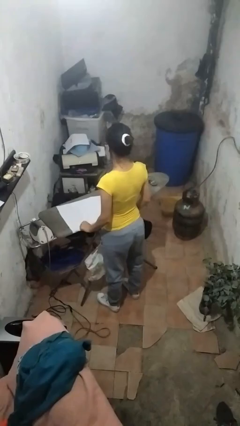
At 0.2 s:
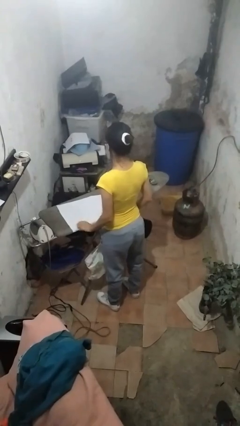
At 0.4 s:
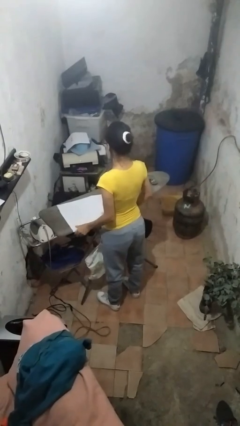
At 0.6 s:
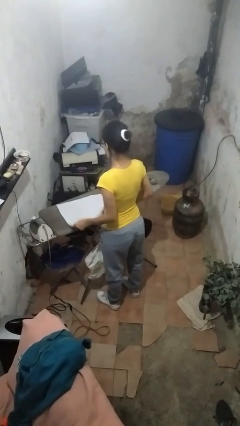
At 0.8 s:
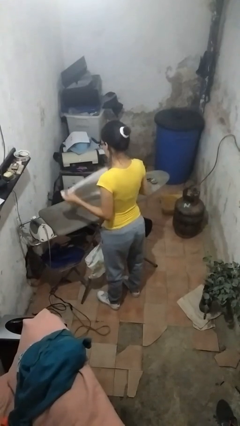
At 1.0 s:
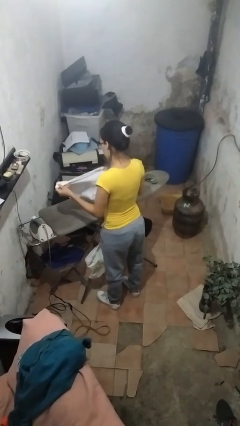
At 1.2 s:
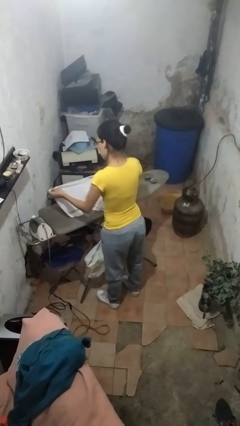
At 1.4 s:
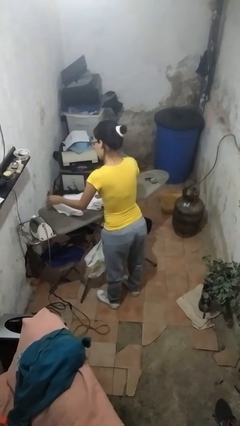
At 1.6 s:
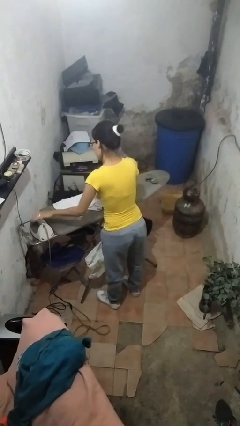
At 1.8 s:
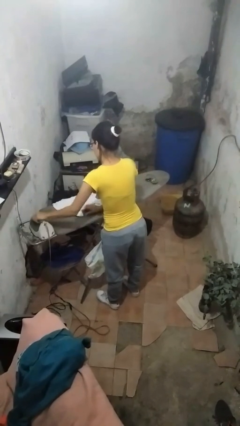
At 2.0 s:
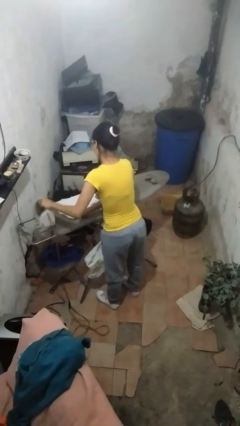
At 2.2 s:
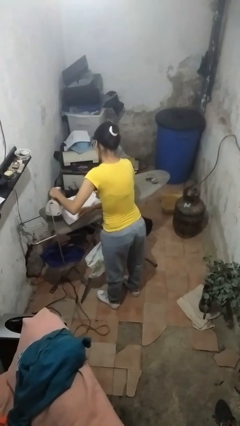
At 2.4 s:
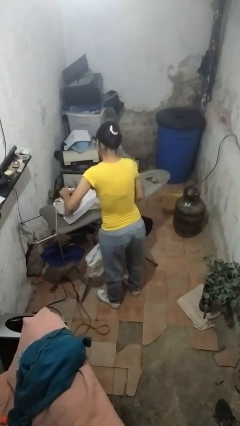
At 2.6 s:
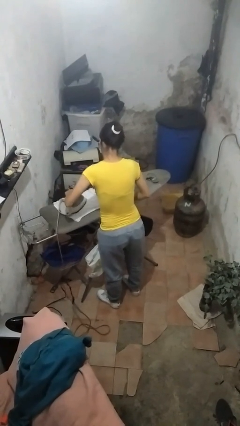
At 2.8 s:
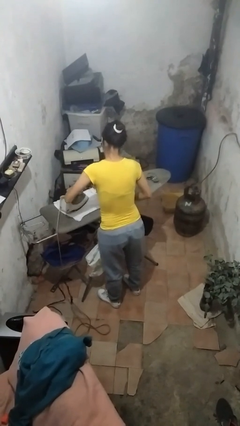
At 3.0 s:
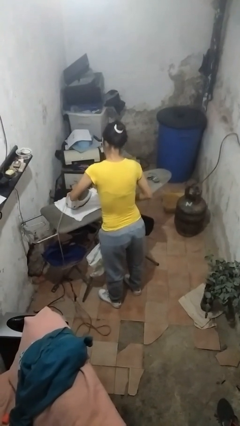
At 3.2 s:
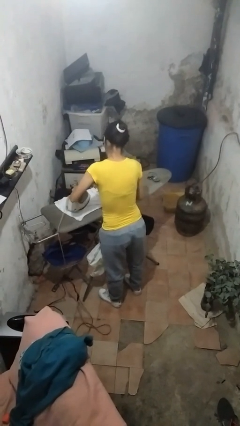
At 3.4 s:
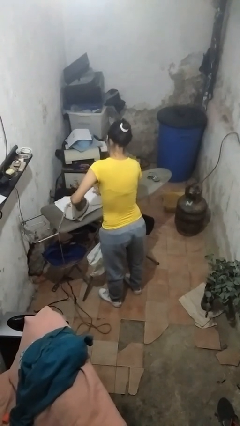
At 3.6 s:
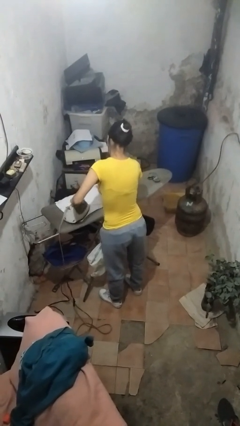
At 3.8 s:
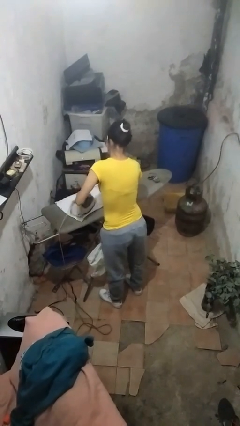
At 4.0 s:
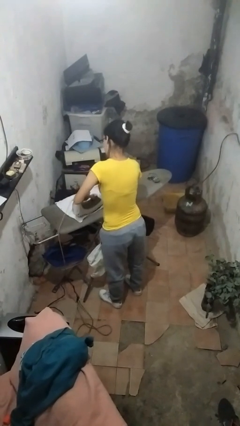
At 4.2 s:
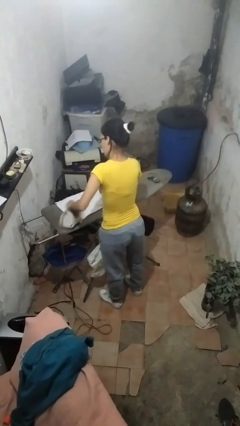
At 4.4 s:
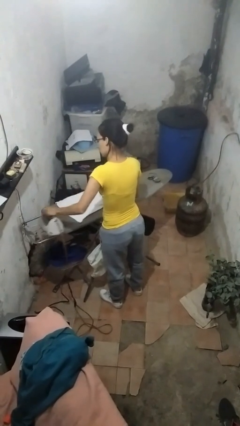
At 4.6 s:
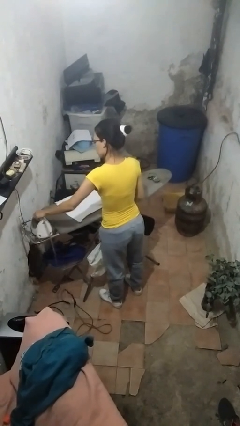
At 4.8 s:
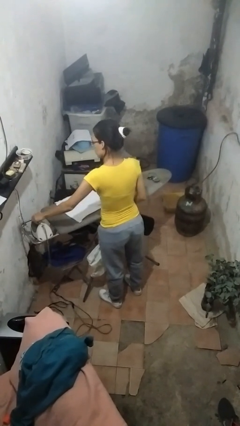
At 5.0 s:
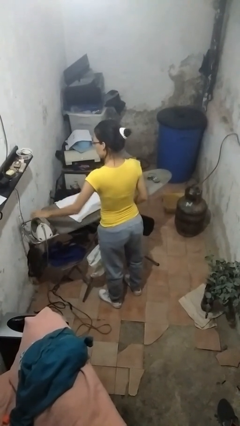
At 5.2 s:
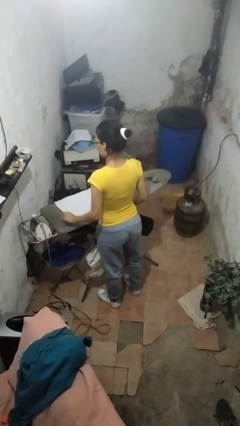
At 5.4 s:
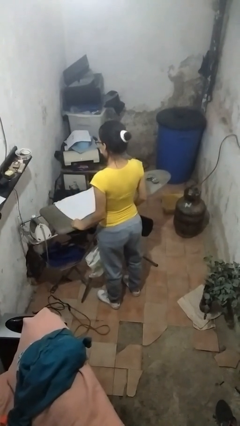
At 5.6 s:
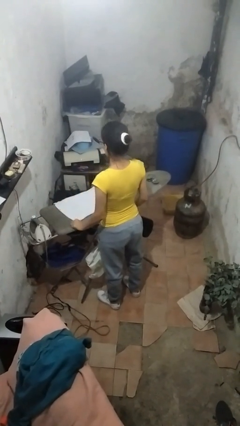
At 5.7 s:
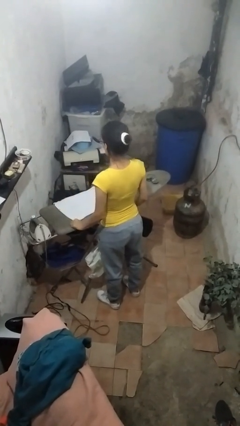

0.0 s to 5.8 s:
person irons clothes

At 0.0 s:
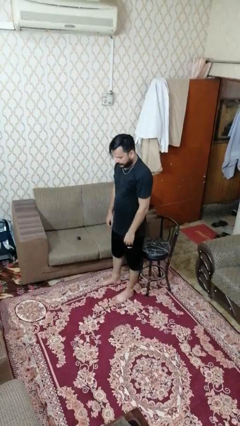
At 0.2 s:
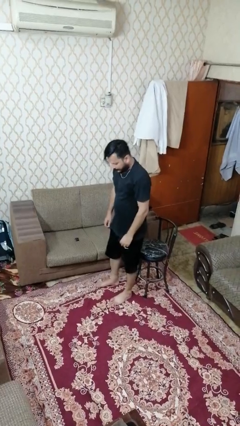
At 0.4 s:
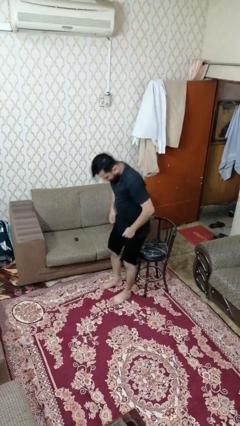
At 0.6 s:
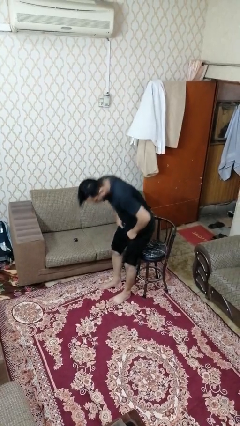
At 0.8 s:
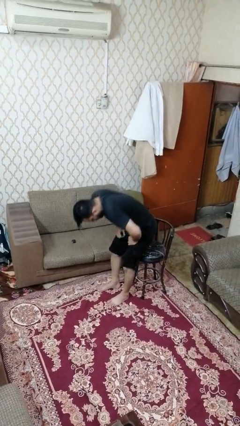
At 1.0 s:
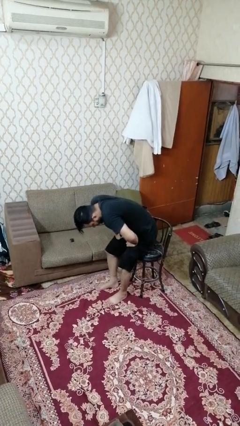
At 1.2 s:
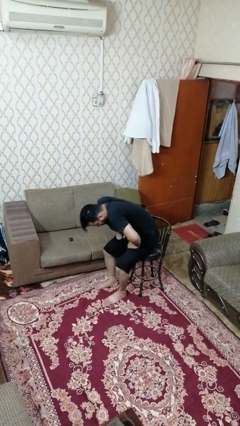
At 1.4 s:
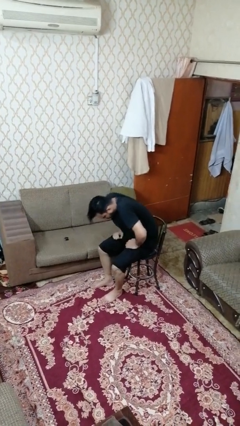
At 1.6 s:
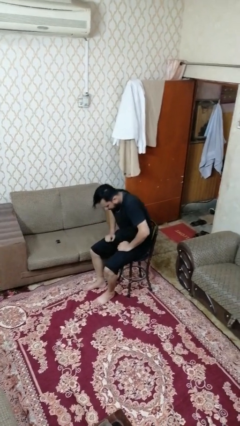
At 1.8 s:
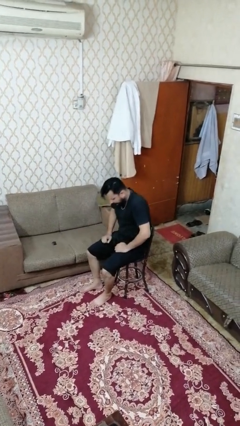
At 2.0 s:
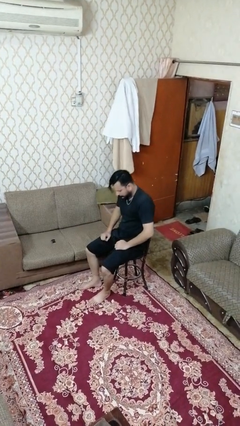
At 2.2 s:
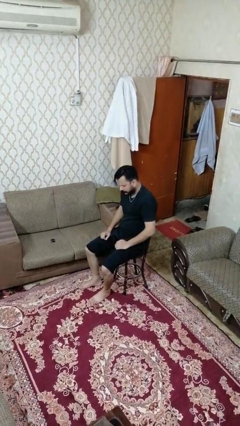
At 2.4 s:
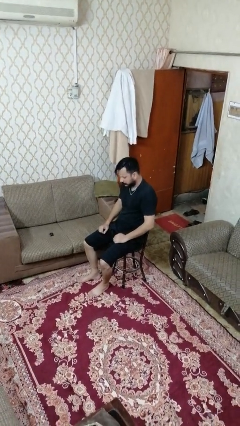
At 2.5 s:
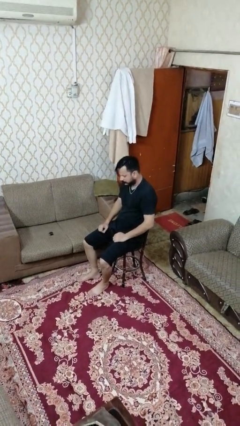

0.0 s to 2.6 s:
person sits down

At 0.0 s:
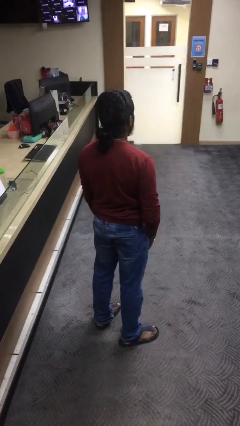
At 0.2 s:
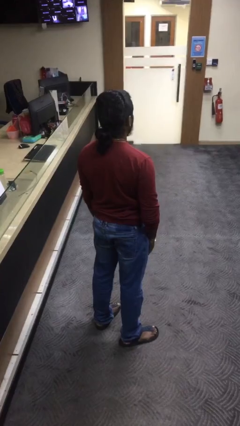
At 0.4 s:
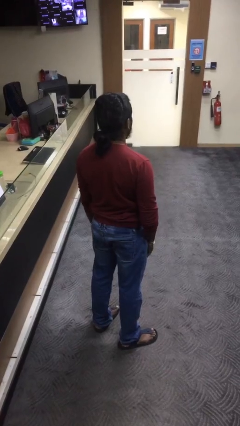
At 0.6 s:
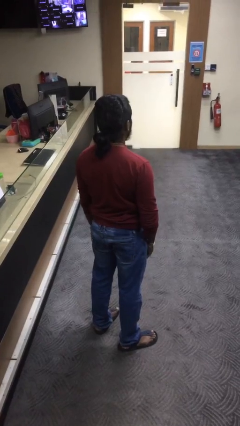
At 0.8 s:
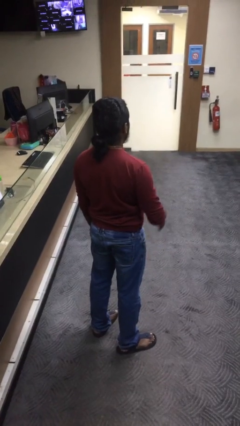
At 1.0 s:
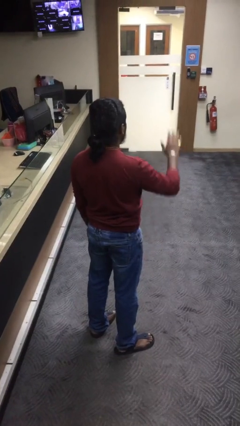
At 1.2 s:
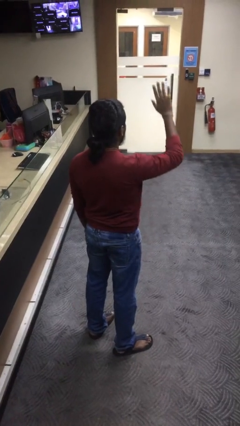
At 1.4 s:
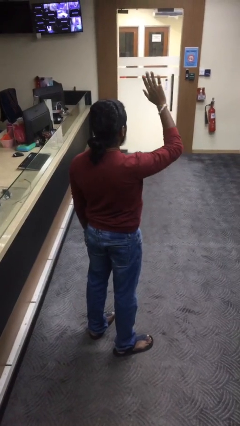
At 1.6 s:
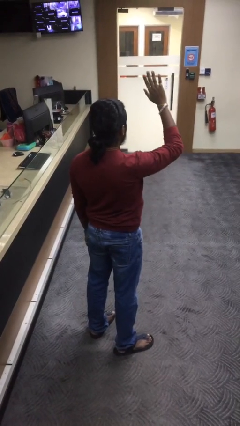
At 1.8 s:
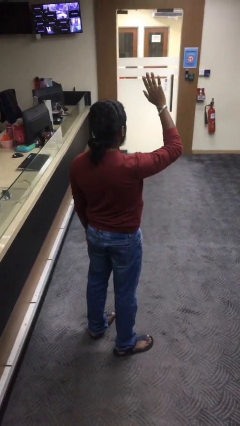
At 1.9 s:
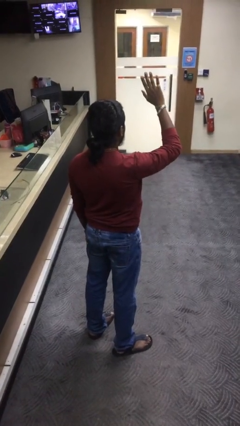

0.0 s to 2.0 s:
person gestures raise hand

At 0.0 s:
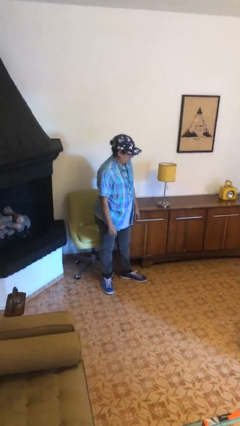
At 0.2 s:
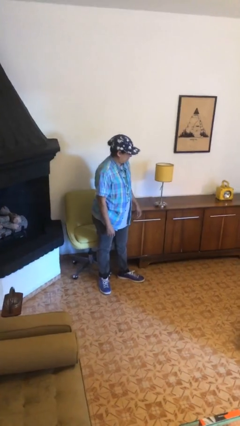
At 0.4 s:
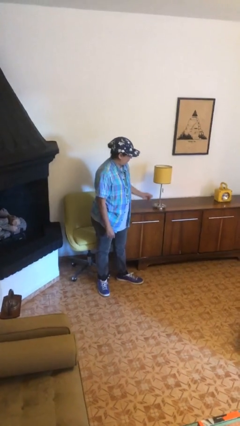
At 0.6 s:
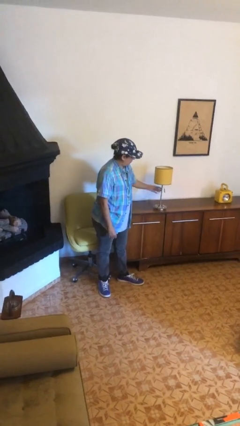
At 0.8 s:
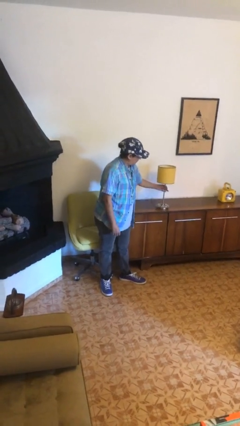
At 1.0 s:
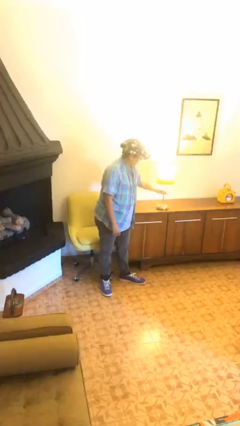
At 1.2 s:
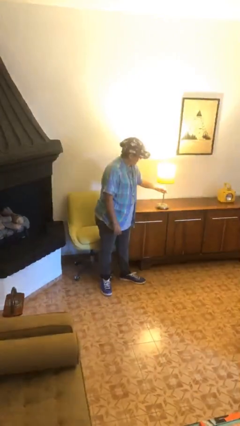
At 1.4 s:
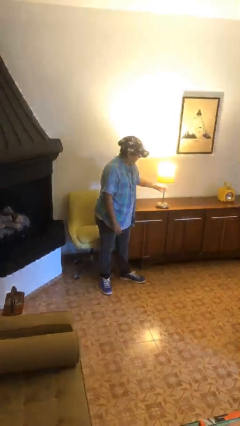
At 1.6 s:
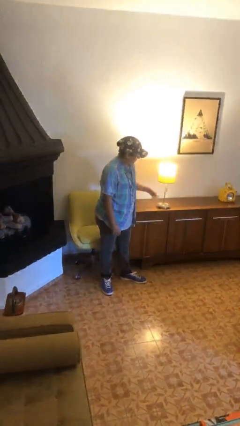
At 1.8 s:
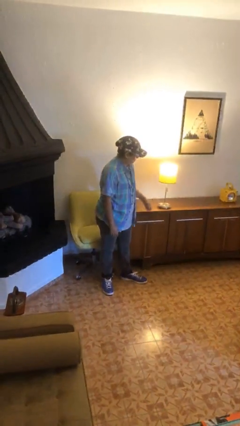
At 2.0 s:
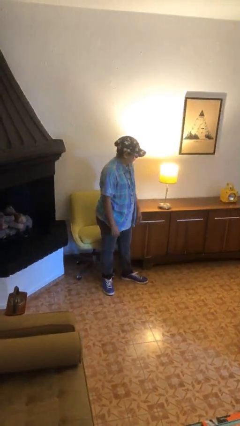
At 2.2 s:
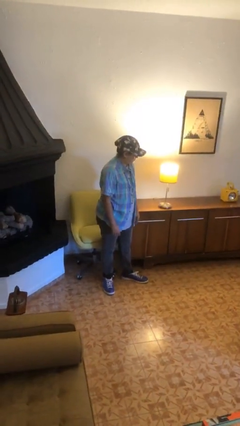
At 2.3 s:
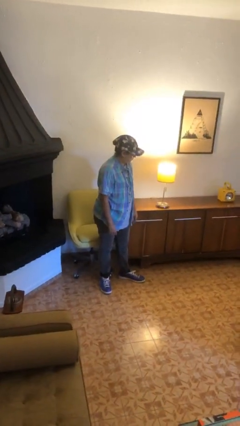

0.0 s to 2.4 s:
person turns on lamp

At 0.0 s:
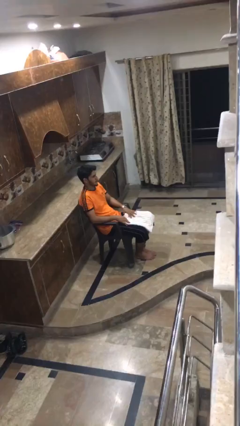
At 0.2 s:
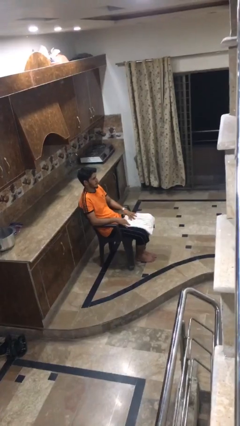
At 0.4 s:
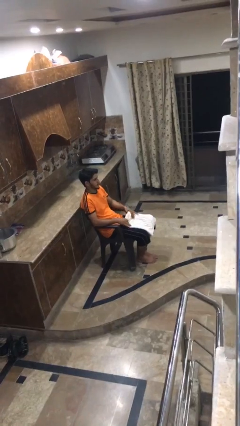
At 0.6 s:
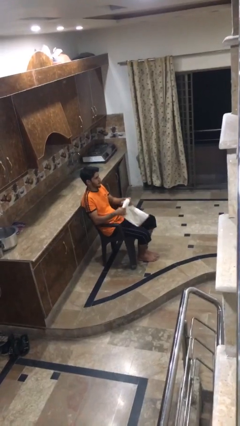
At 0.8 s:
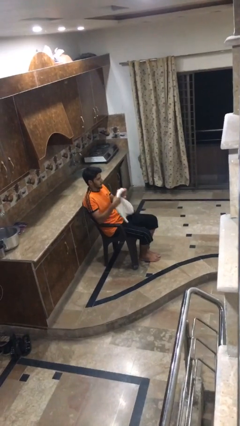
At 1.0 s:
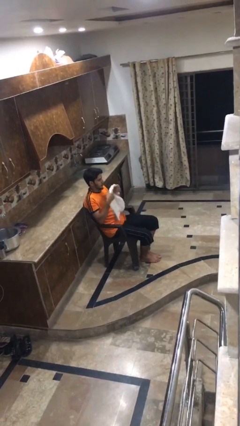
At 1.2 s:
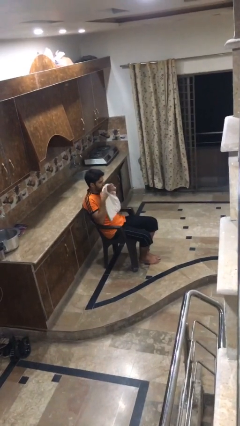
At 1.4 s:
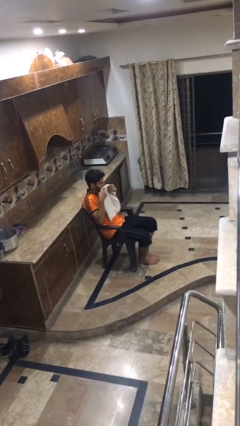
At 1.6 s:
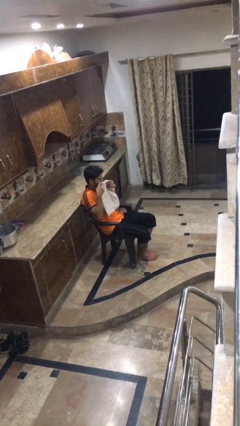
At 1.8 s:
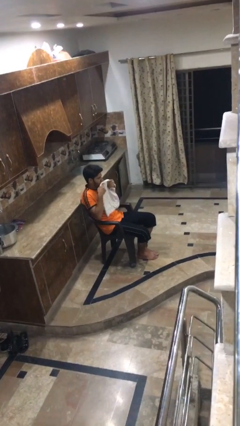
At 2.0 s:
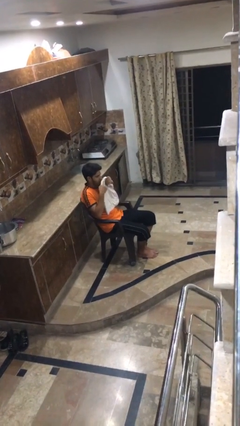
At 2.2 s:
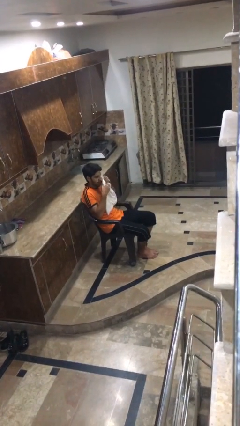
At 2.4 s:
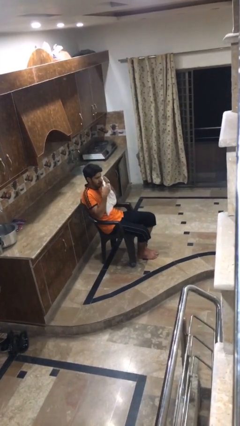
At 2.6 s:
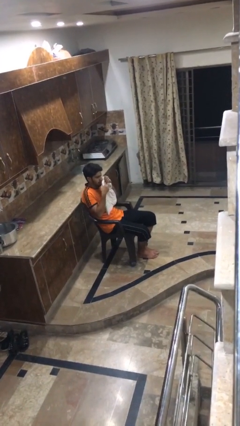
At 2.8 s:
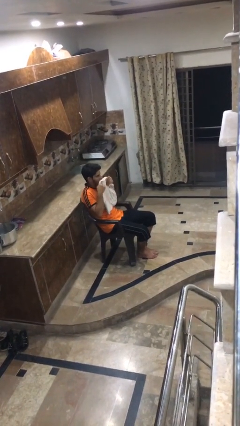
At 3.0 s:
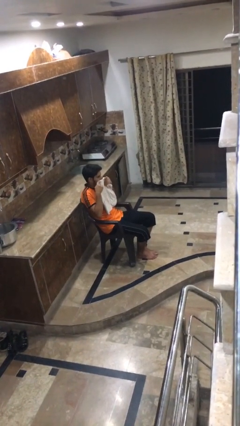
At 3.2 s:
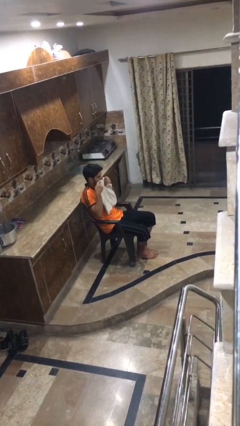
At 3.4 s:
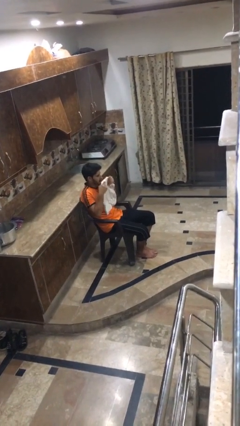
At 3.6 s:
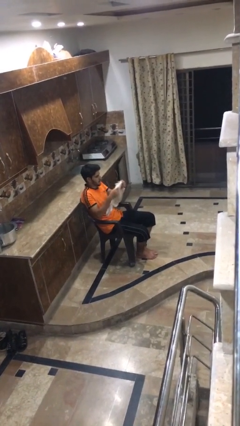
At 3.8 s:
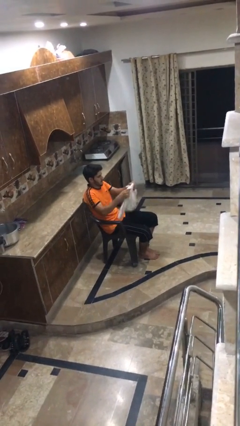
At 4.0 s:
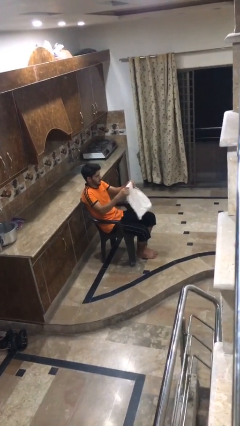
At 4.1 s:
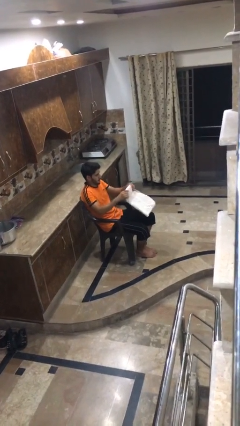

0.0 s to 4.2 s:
person wipes mouth with napkin
